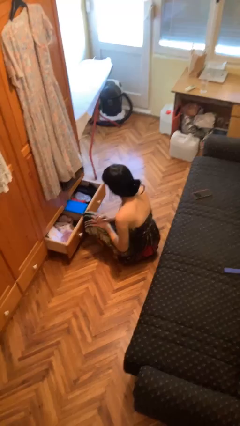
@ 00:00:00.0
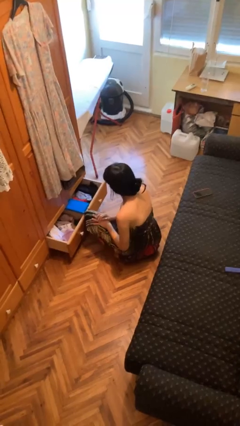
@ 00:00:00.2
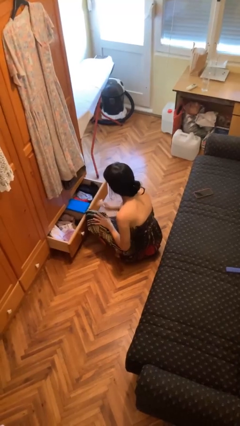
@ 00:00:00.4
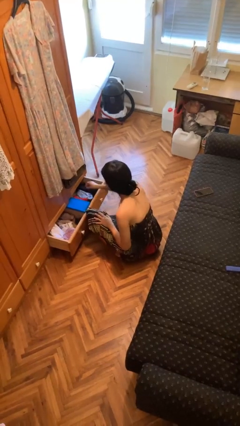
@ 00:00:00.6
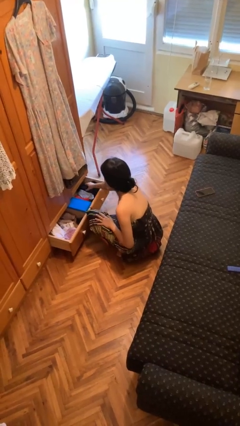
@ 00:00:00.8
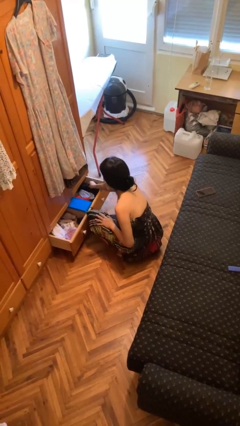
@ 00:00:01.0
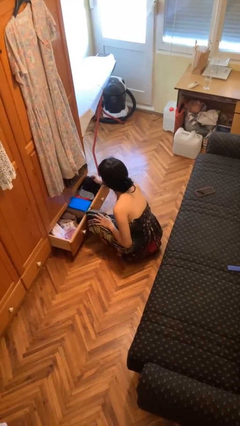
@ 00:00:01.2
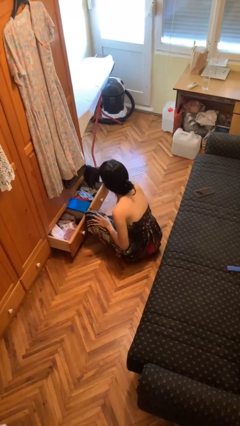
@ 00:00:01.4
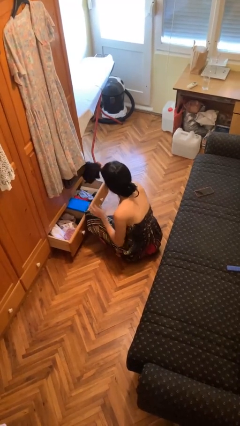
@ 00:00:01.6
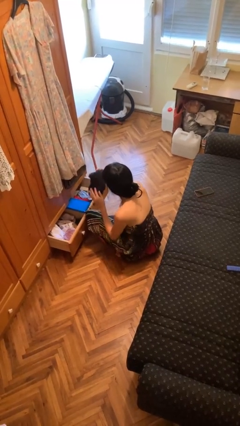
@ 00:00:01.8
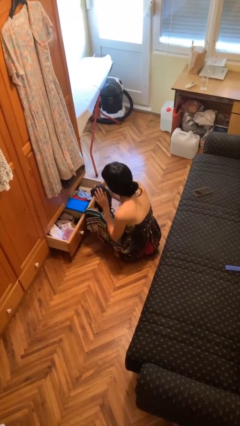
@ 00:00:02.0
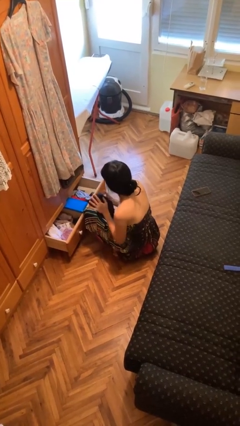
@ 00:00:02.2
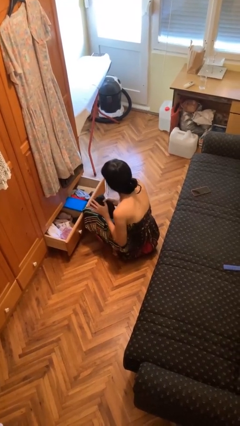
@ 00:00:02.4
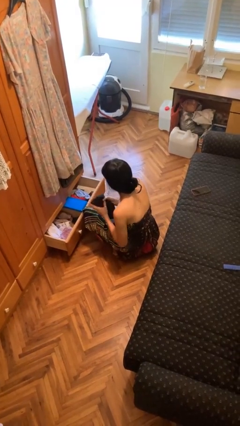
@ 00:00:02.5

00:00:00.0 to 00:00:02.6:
person takes clothes from dresser

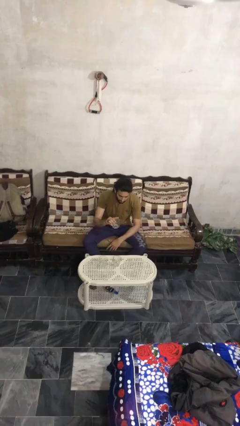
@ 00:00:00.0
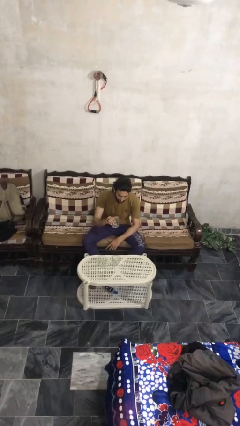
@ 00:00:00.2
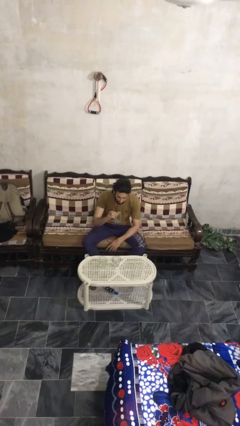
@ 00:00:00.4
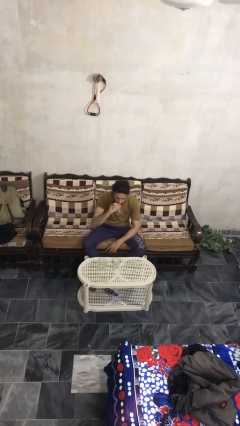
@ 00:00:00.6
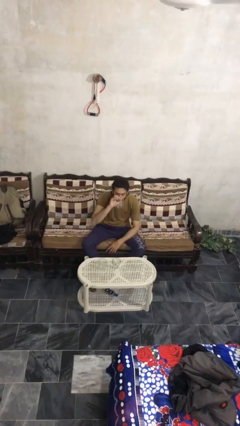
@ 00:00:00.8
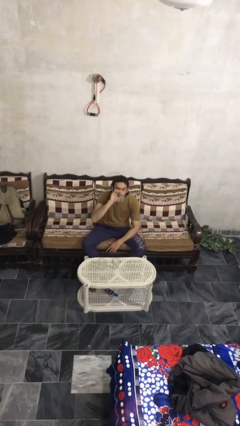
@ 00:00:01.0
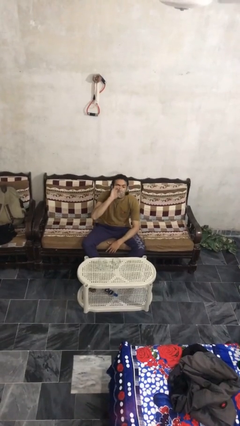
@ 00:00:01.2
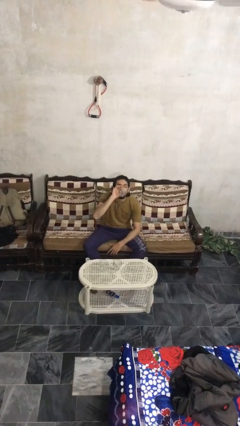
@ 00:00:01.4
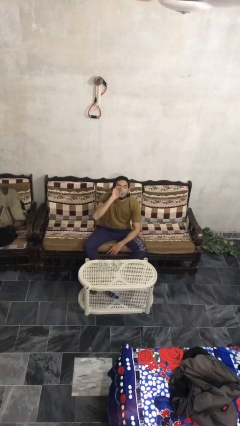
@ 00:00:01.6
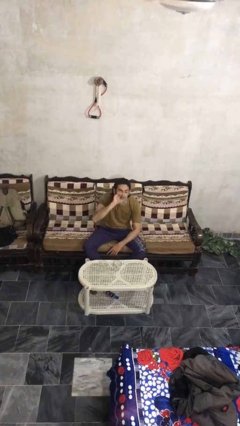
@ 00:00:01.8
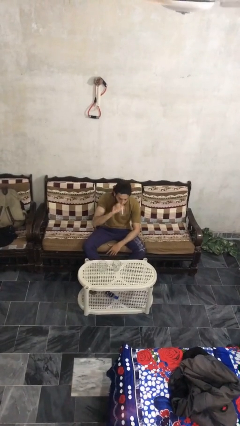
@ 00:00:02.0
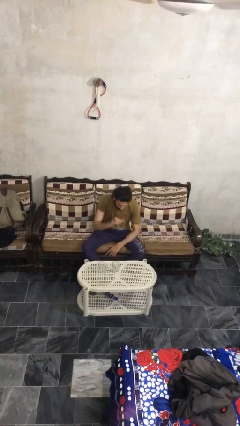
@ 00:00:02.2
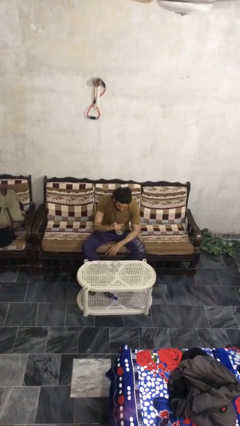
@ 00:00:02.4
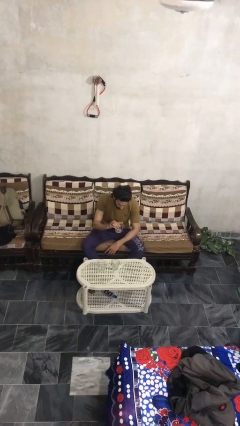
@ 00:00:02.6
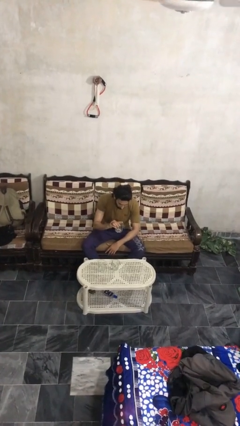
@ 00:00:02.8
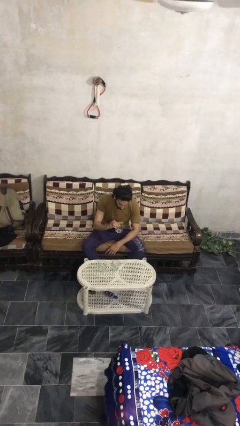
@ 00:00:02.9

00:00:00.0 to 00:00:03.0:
person drinks from shotglass

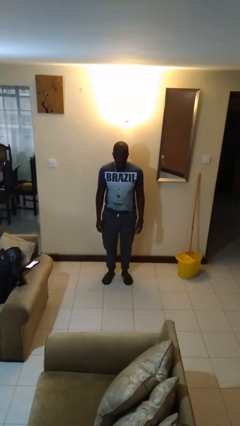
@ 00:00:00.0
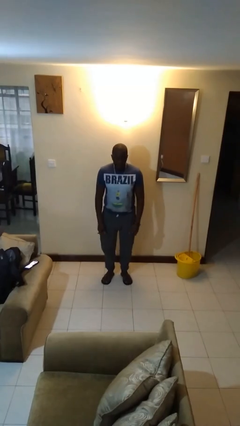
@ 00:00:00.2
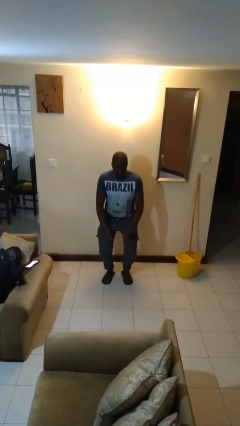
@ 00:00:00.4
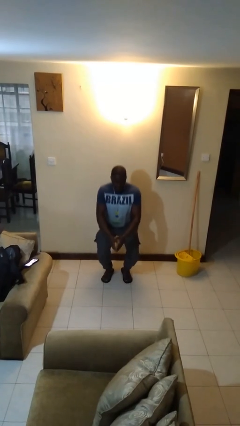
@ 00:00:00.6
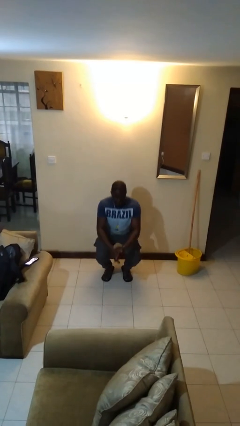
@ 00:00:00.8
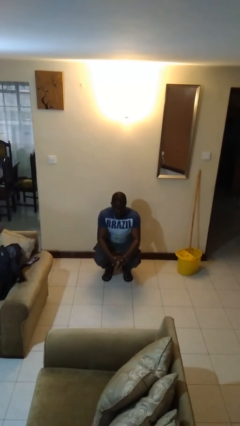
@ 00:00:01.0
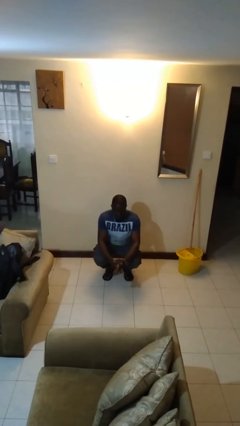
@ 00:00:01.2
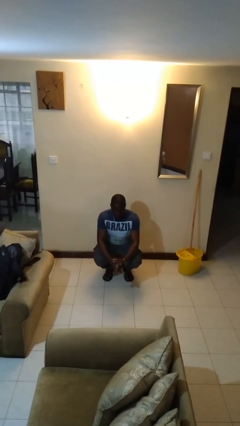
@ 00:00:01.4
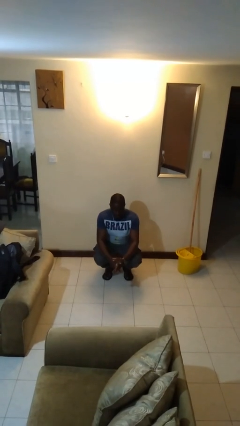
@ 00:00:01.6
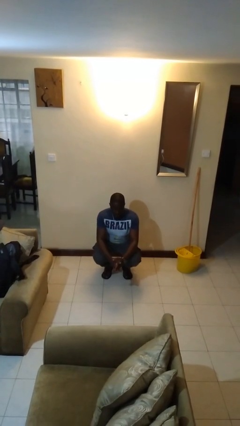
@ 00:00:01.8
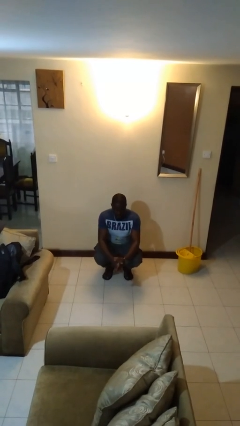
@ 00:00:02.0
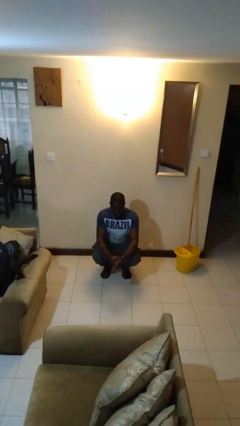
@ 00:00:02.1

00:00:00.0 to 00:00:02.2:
person squats

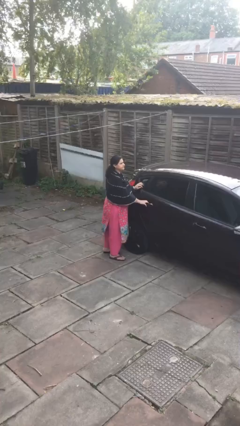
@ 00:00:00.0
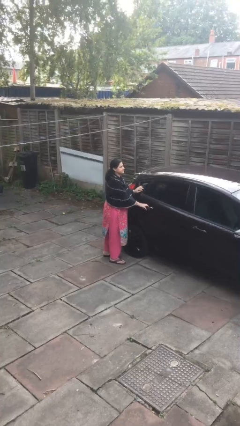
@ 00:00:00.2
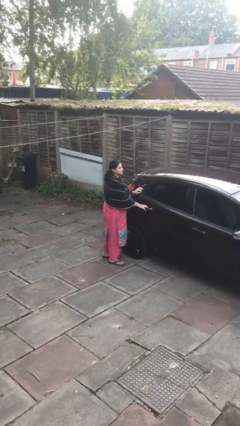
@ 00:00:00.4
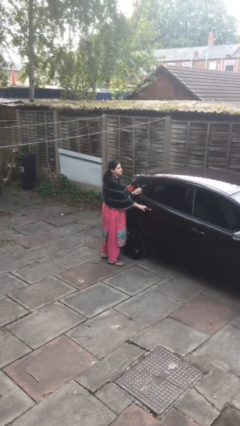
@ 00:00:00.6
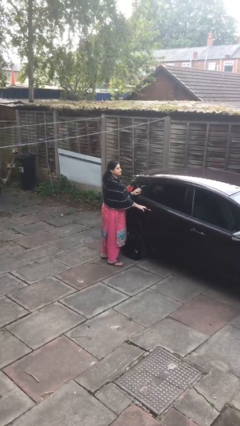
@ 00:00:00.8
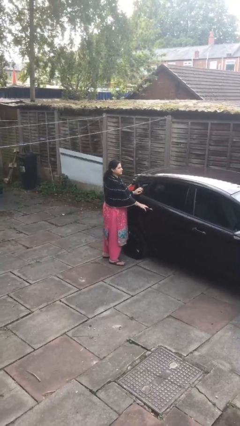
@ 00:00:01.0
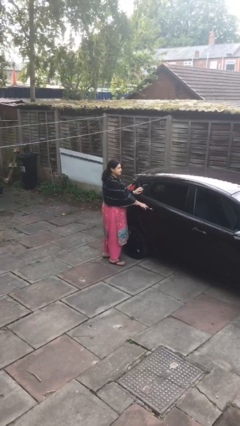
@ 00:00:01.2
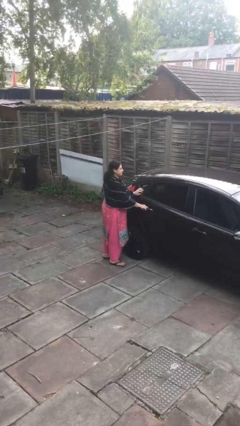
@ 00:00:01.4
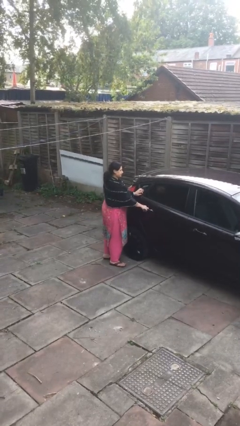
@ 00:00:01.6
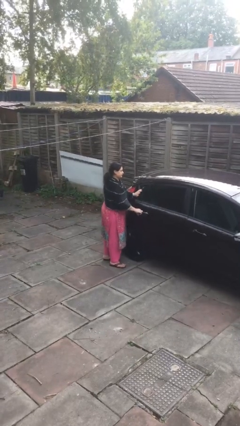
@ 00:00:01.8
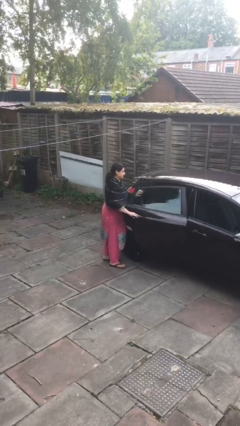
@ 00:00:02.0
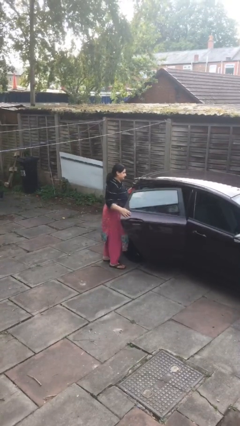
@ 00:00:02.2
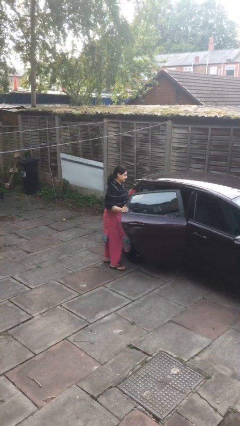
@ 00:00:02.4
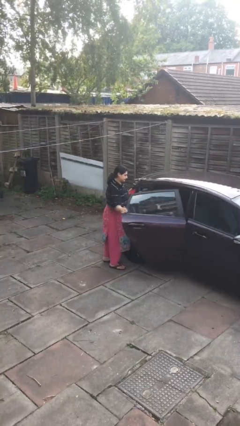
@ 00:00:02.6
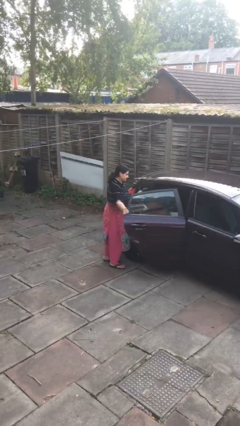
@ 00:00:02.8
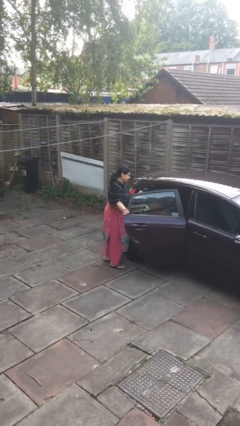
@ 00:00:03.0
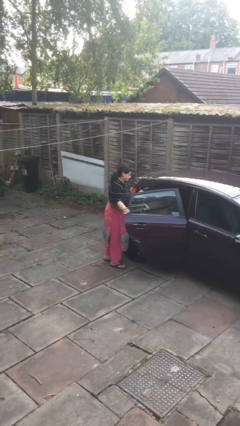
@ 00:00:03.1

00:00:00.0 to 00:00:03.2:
person opens car door

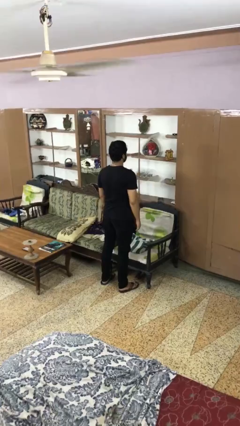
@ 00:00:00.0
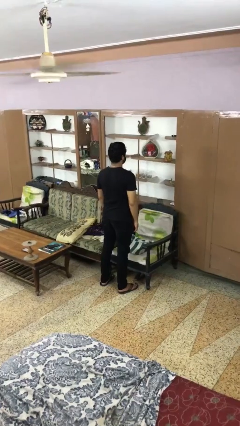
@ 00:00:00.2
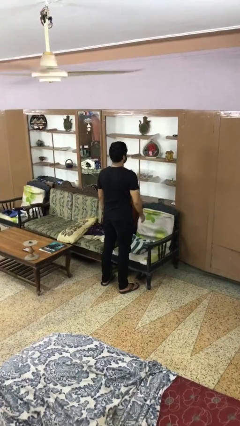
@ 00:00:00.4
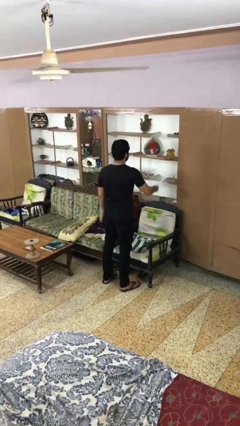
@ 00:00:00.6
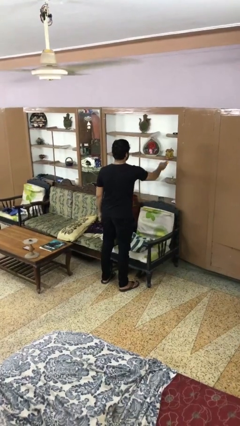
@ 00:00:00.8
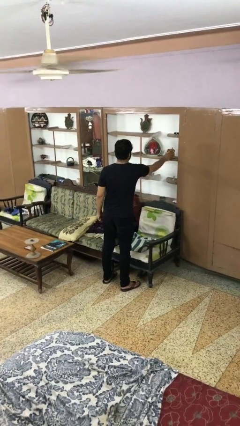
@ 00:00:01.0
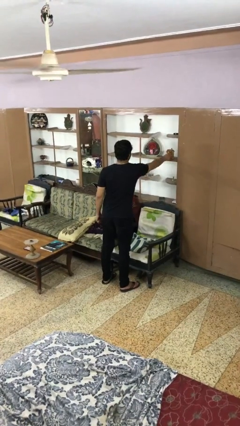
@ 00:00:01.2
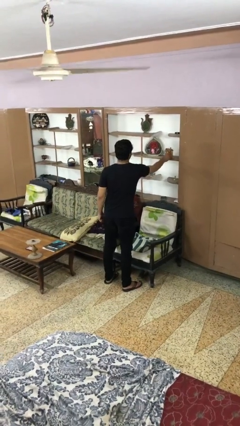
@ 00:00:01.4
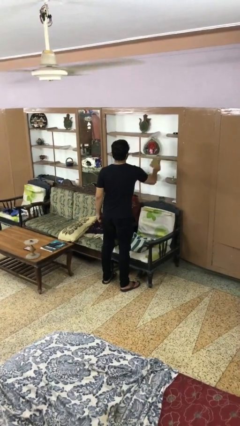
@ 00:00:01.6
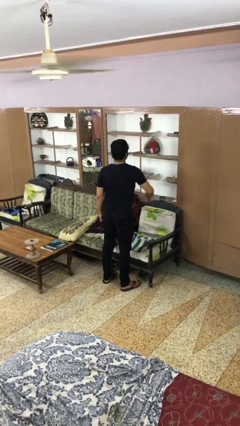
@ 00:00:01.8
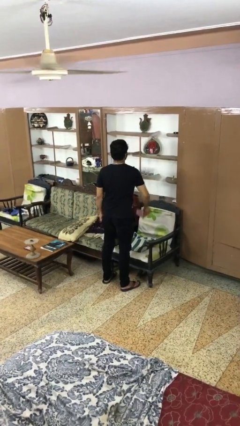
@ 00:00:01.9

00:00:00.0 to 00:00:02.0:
person picks up object from shelf

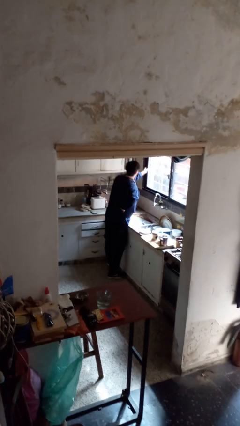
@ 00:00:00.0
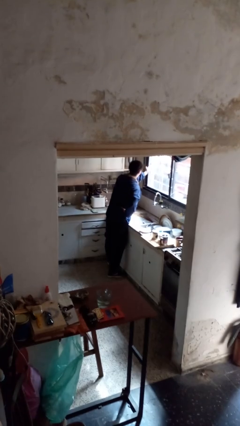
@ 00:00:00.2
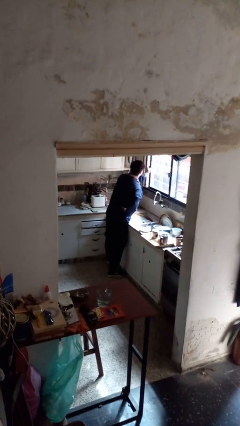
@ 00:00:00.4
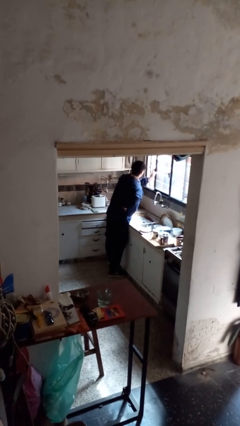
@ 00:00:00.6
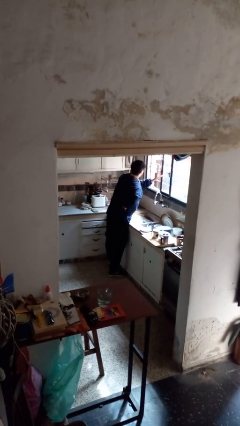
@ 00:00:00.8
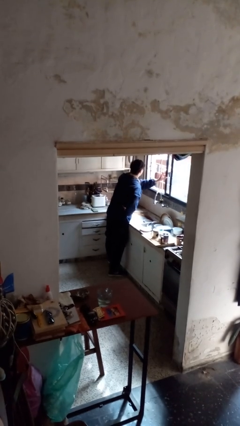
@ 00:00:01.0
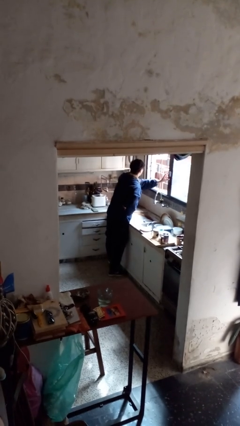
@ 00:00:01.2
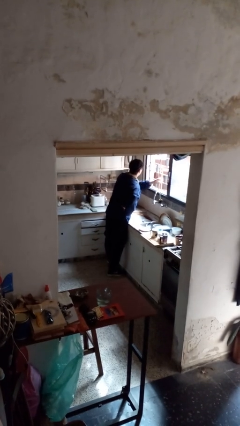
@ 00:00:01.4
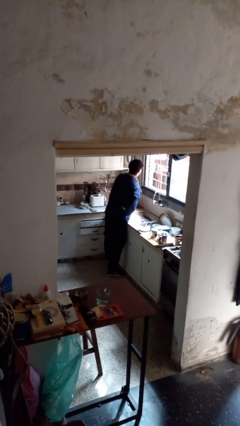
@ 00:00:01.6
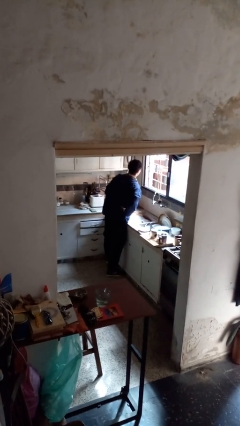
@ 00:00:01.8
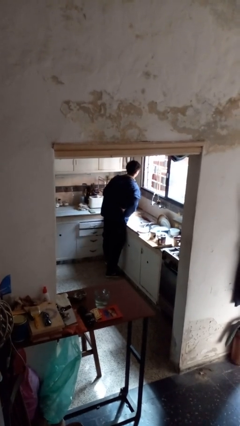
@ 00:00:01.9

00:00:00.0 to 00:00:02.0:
person opens home window

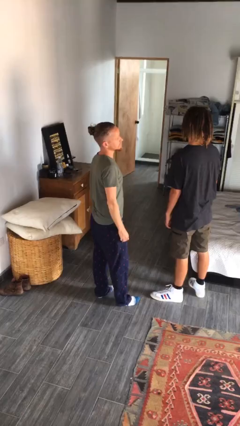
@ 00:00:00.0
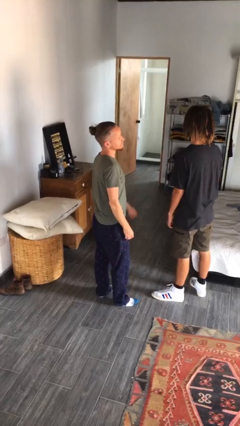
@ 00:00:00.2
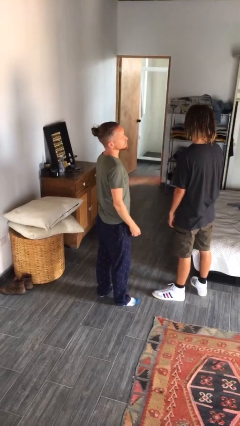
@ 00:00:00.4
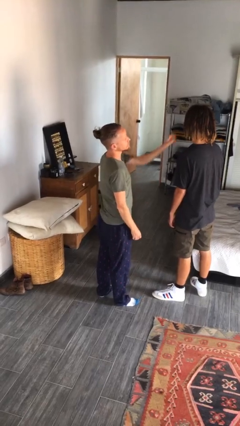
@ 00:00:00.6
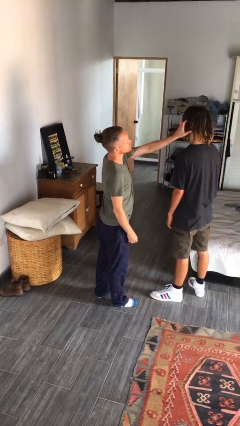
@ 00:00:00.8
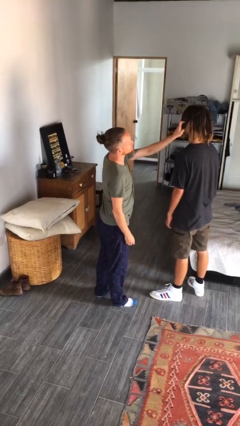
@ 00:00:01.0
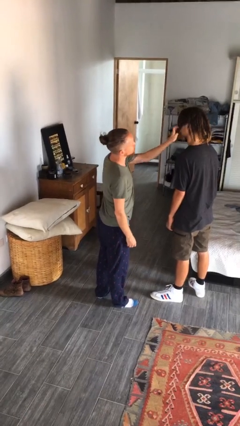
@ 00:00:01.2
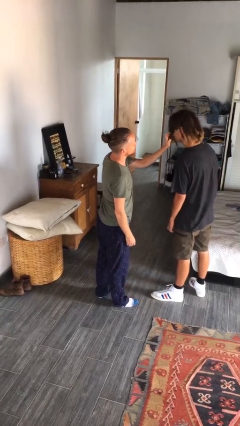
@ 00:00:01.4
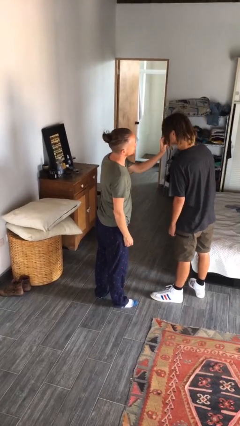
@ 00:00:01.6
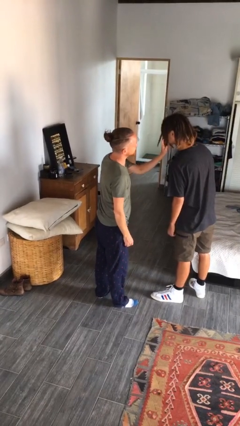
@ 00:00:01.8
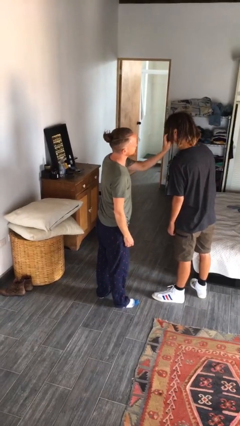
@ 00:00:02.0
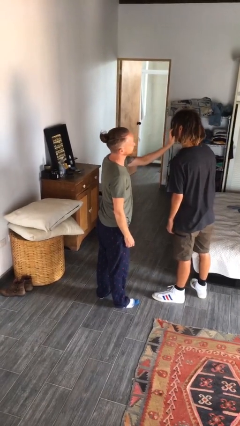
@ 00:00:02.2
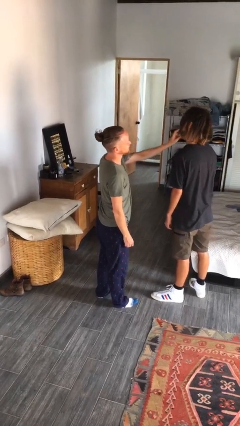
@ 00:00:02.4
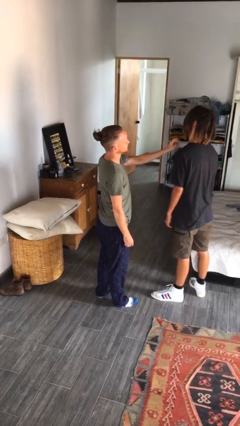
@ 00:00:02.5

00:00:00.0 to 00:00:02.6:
person grabs person by hair
